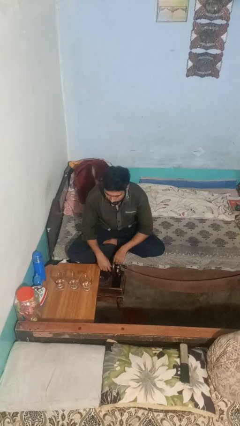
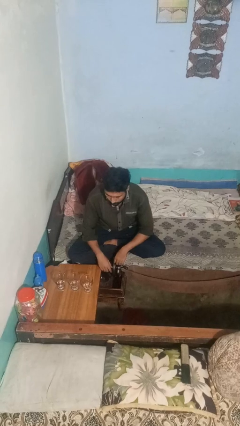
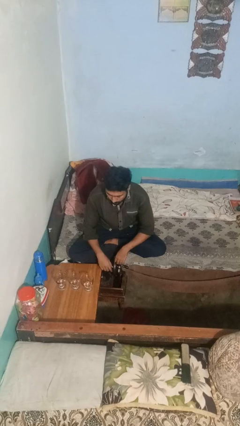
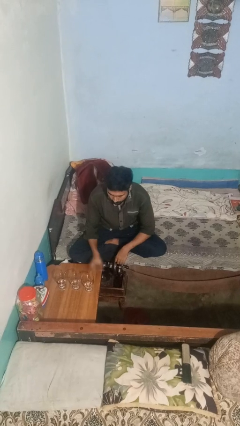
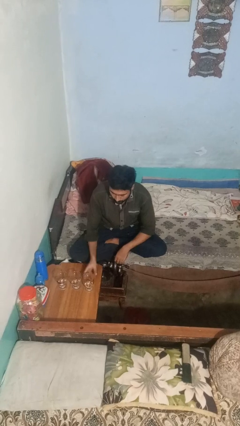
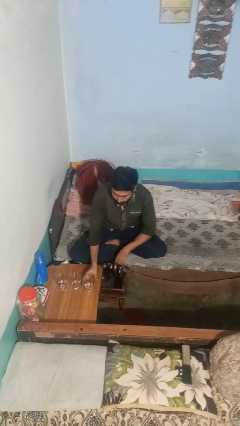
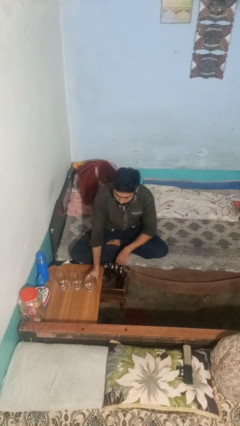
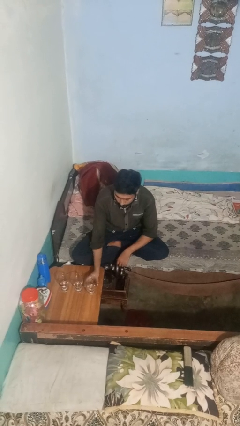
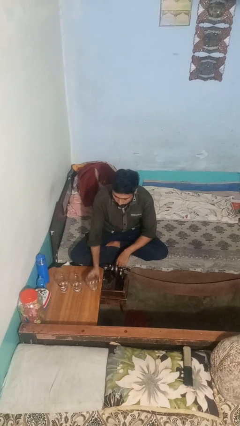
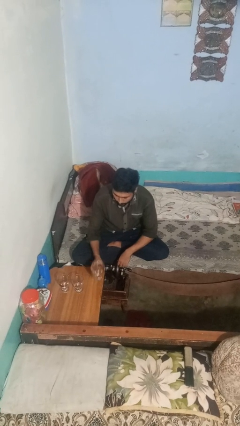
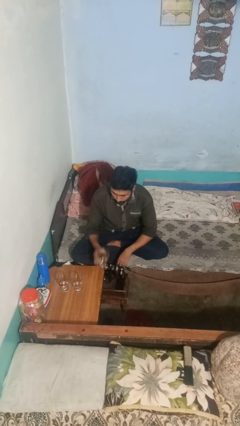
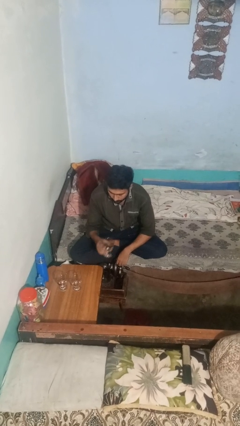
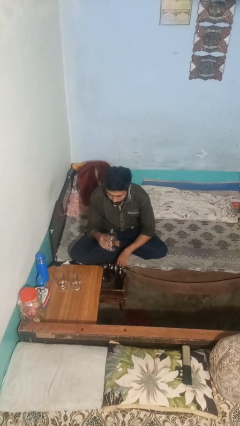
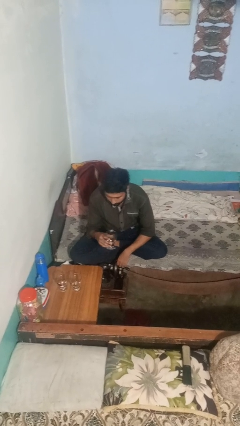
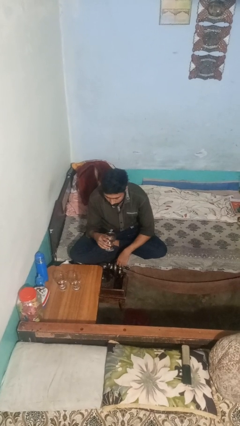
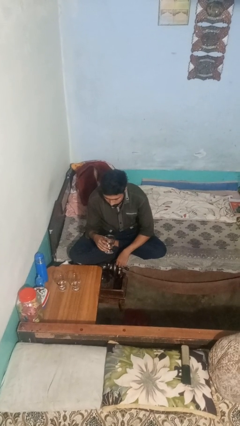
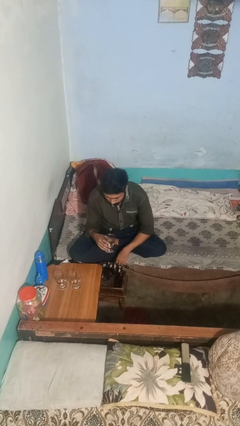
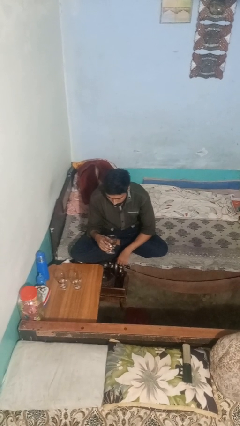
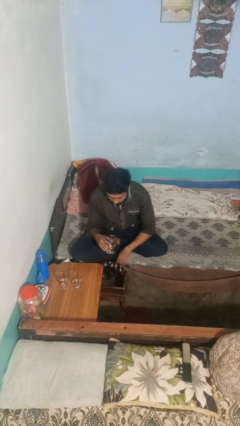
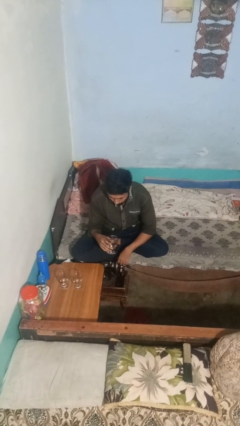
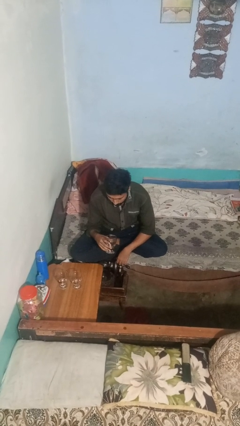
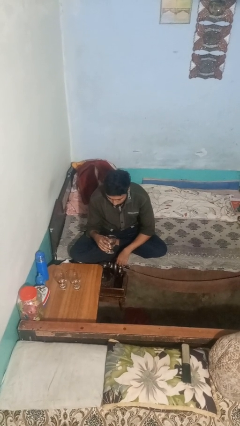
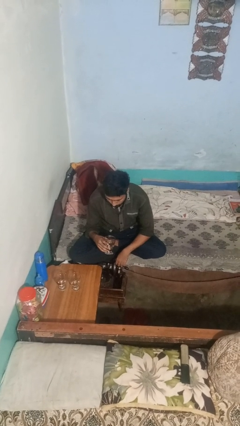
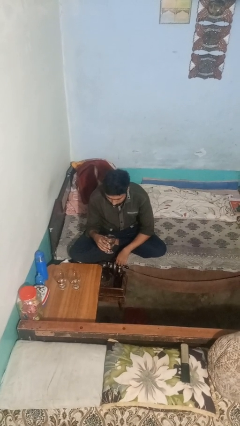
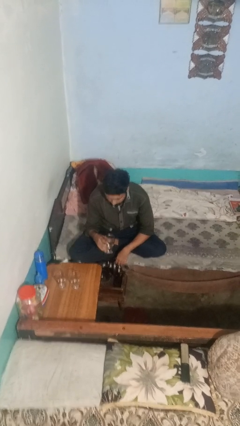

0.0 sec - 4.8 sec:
person picks up object from table

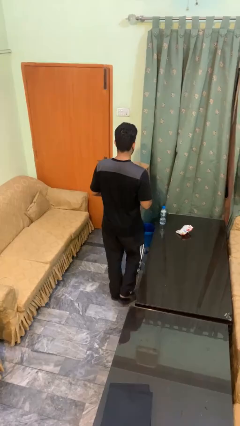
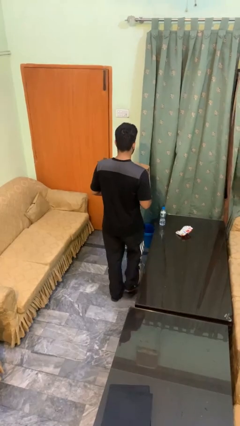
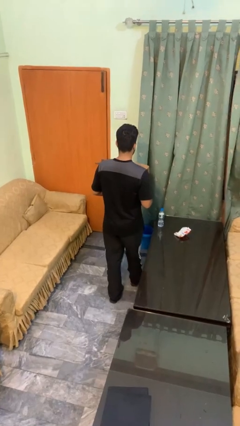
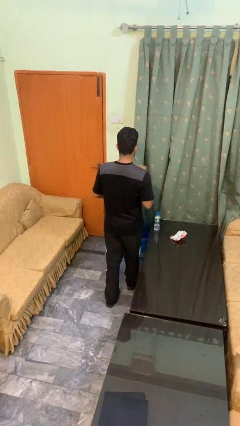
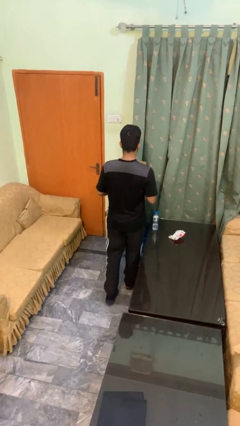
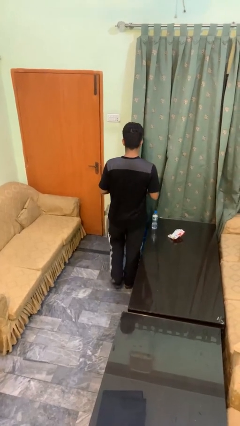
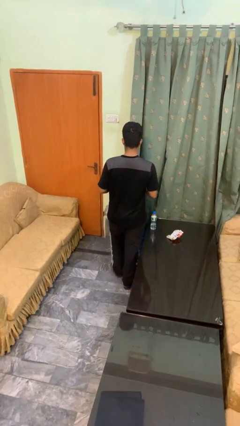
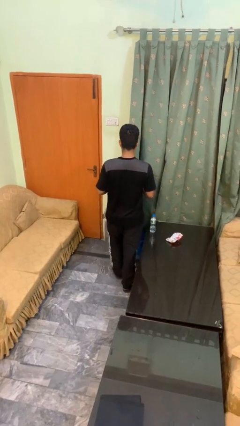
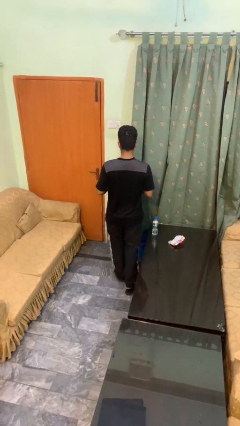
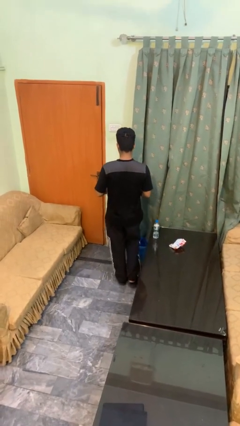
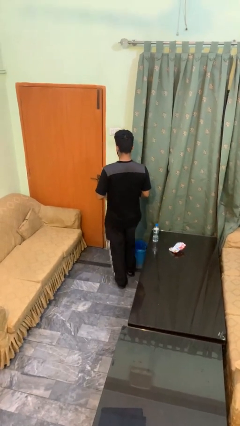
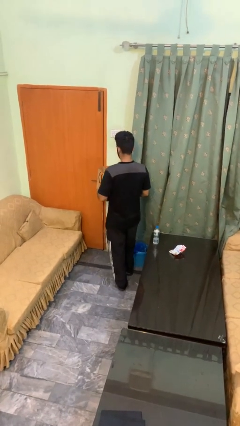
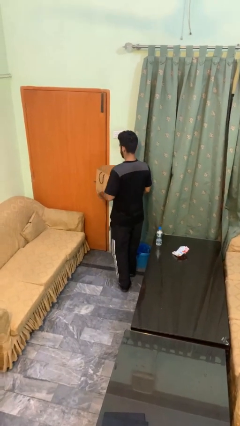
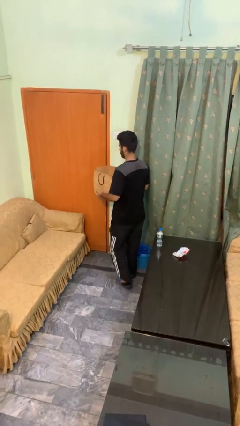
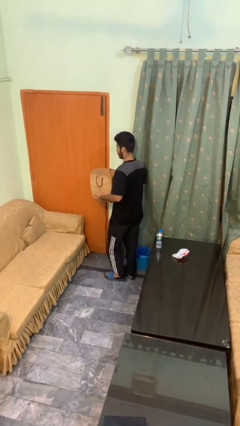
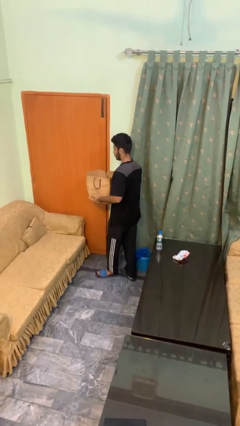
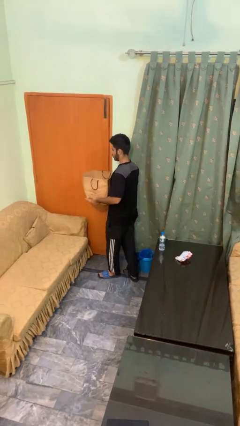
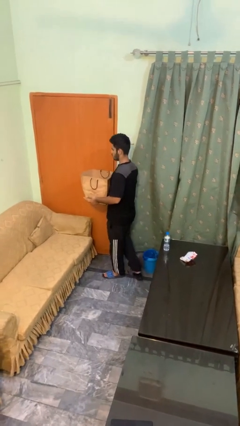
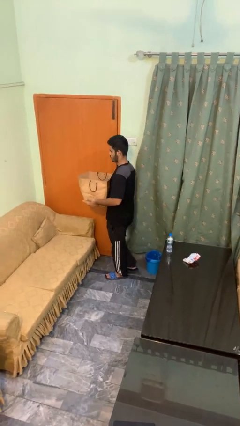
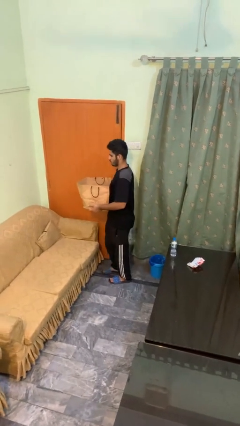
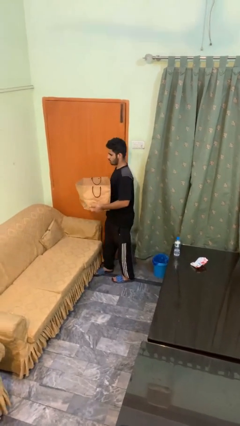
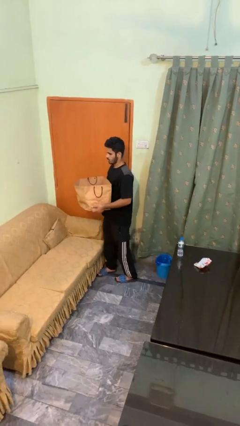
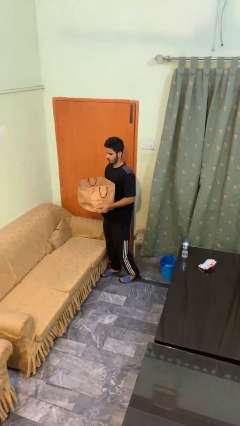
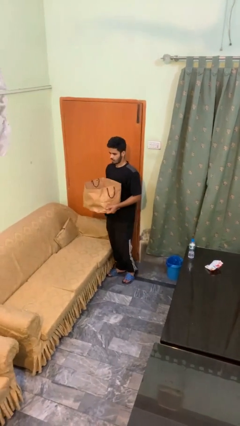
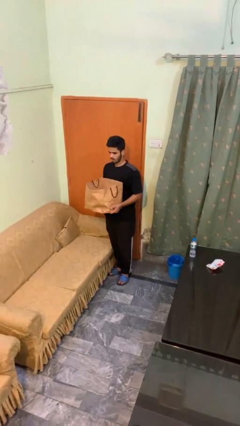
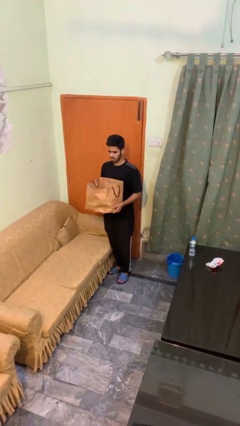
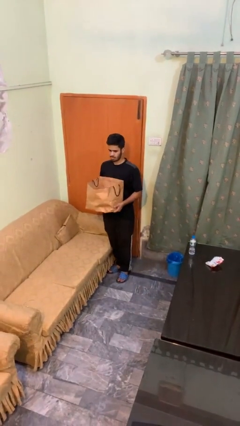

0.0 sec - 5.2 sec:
person carries groceries

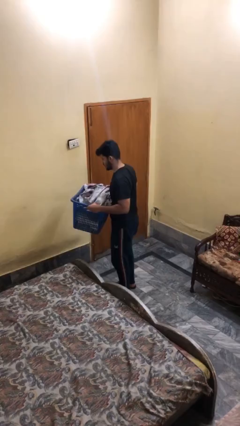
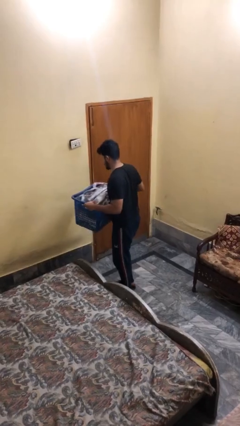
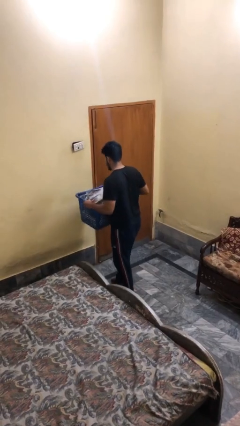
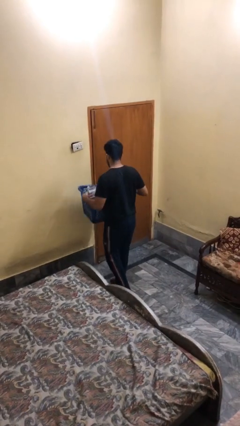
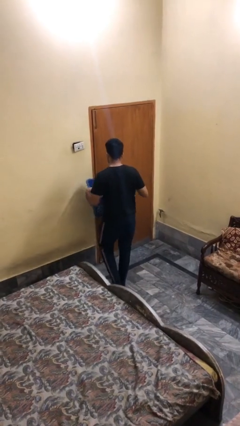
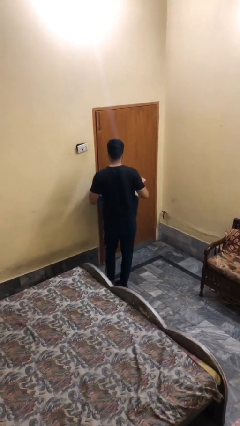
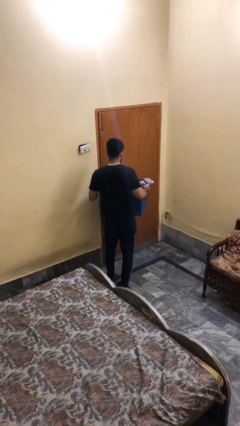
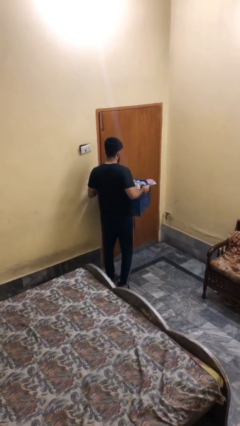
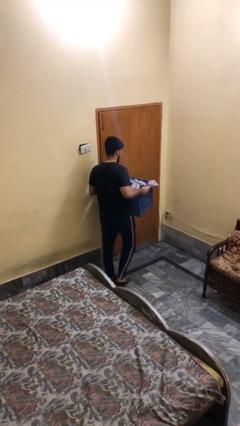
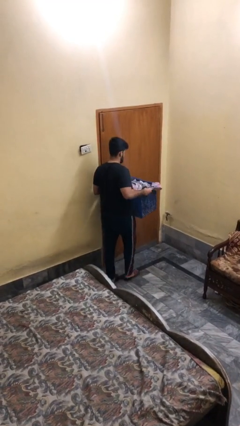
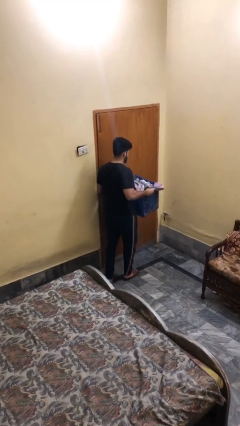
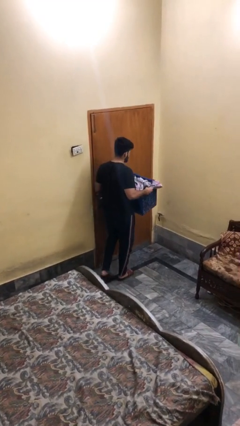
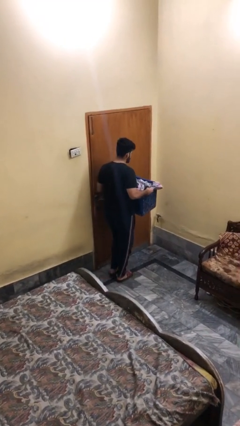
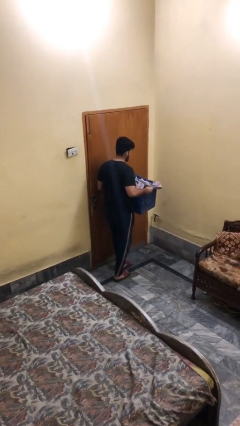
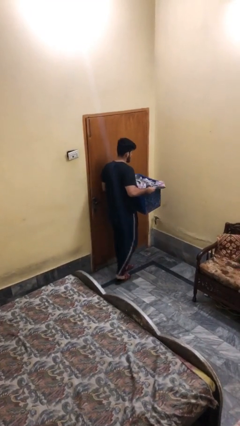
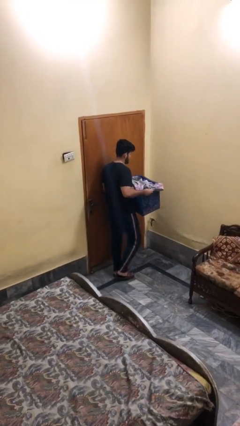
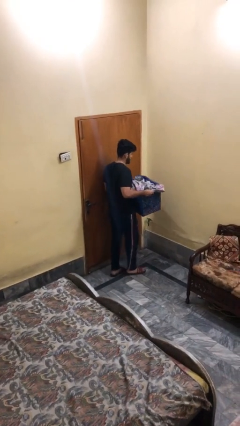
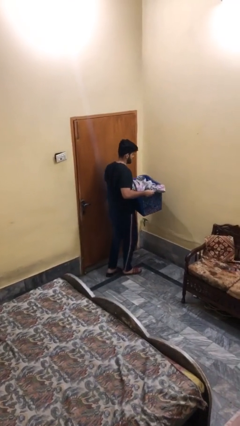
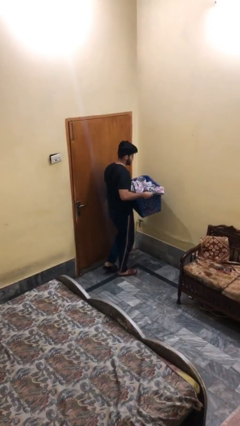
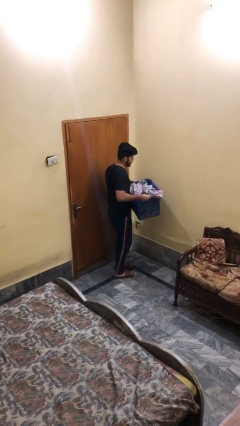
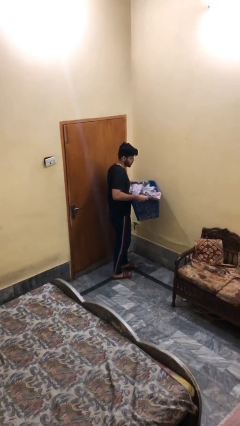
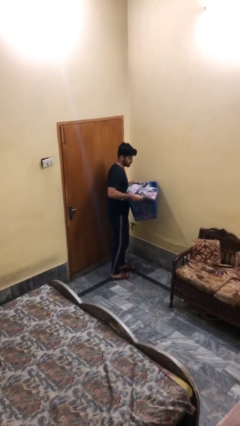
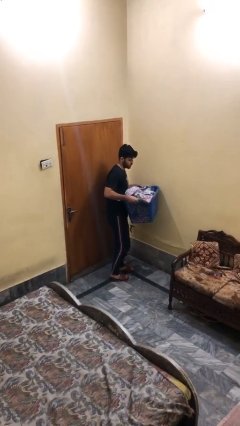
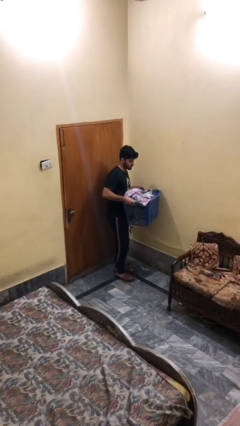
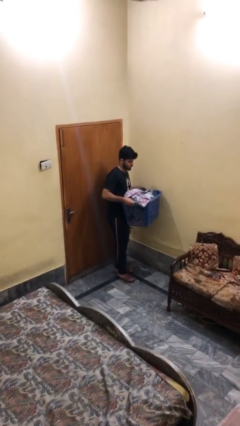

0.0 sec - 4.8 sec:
person carries laundry basket

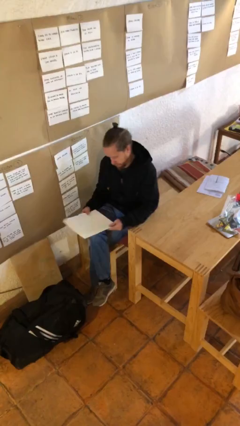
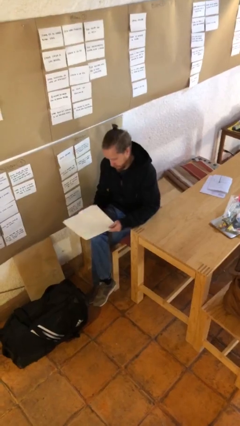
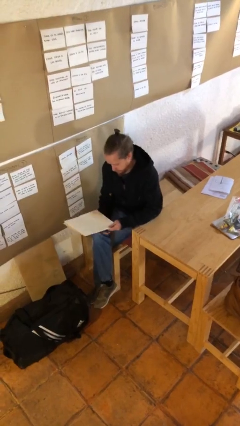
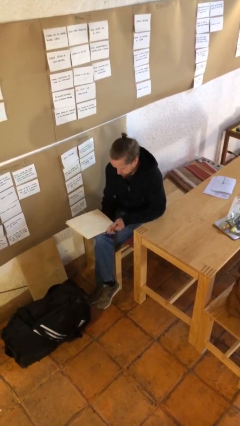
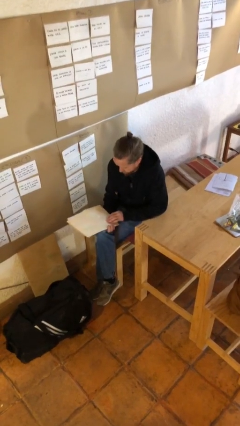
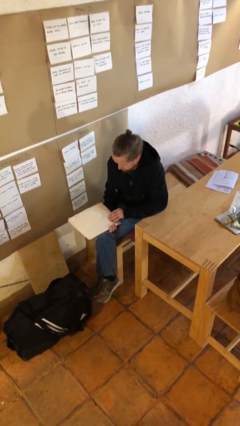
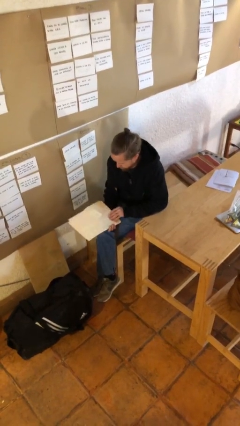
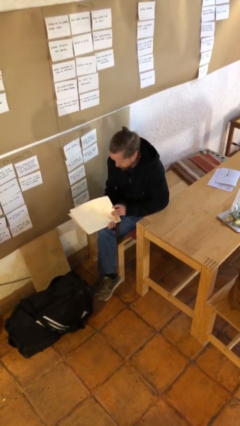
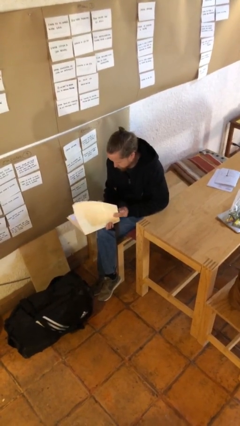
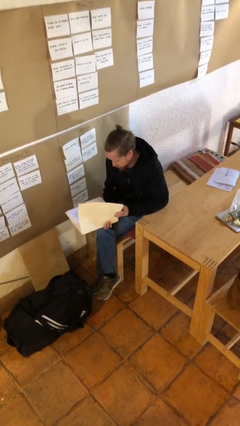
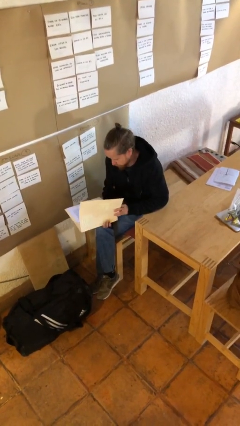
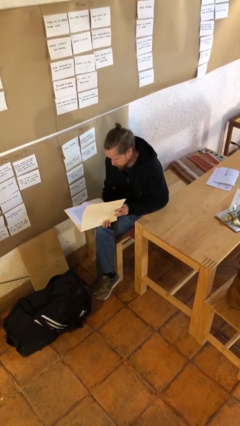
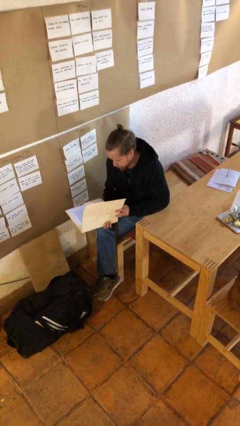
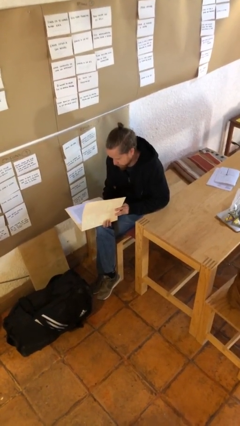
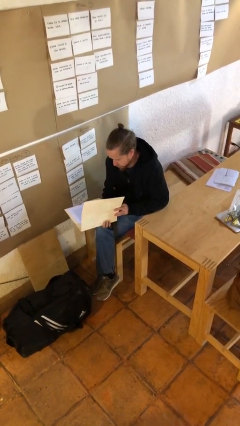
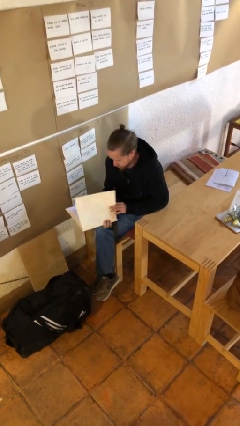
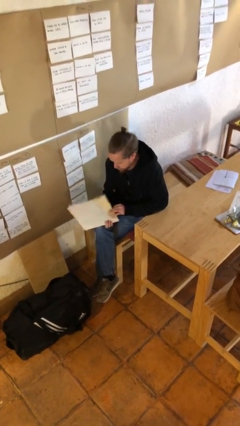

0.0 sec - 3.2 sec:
person reads document
